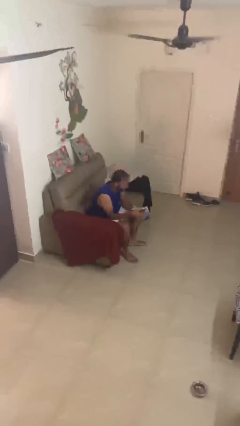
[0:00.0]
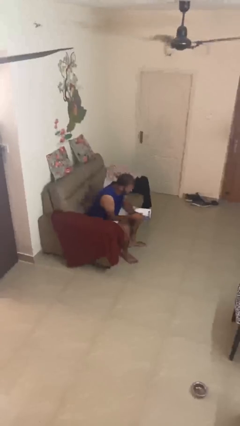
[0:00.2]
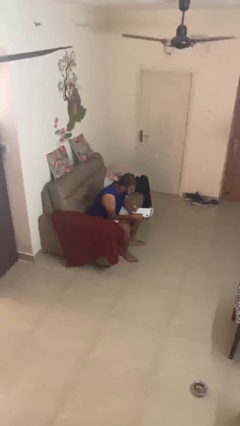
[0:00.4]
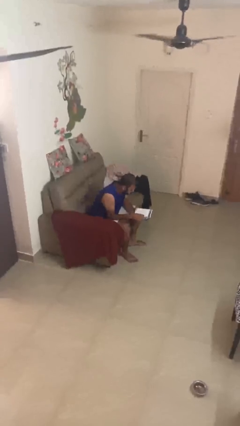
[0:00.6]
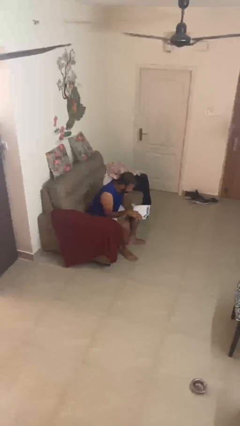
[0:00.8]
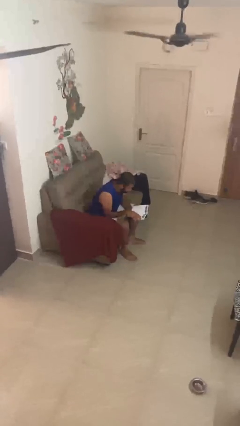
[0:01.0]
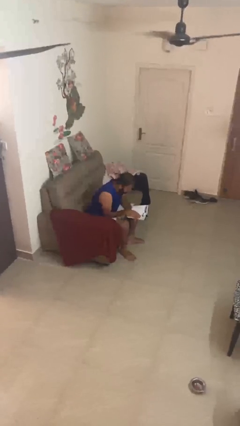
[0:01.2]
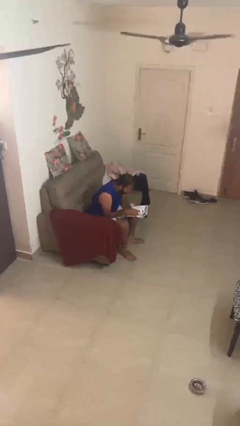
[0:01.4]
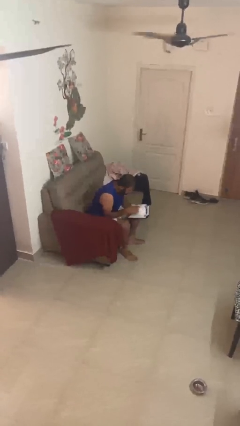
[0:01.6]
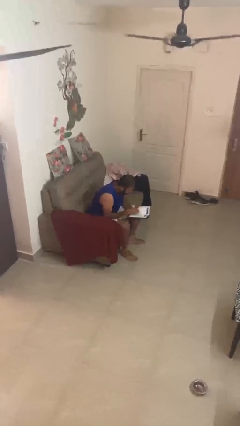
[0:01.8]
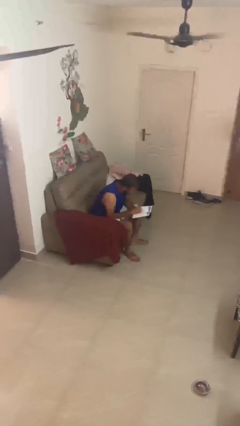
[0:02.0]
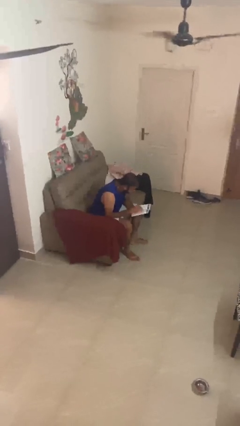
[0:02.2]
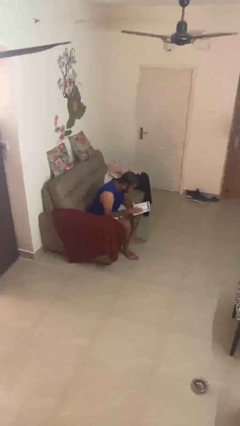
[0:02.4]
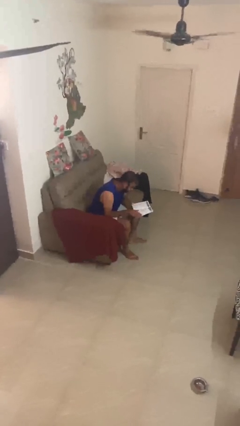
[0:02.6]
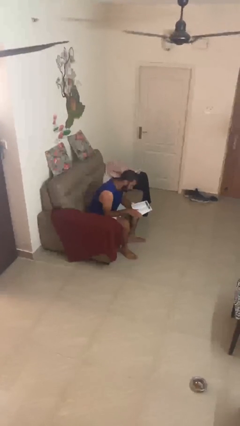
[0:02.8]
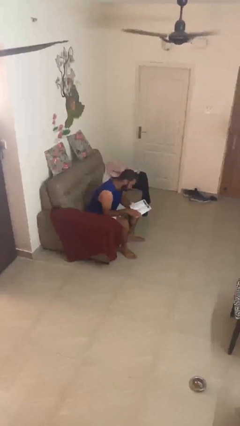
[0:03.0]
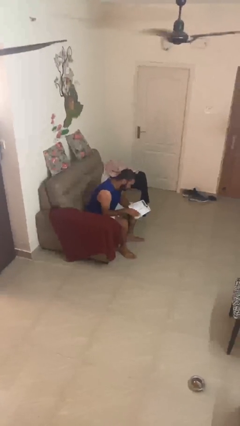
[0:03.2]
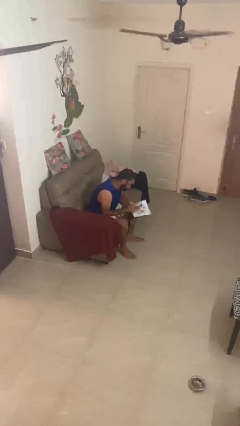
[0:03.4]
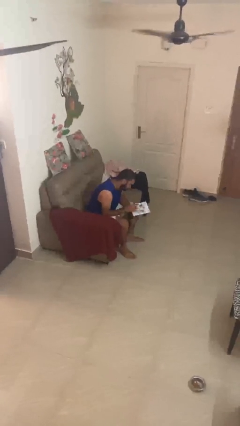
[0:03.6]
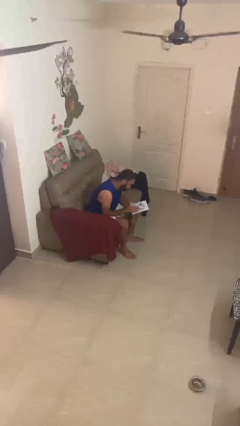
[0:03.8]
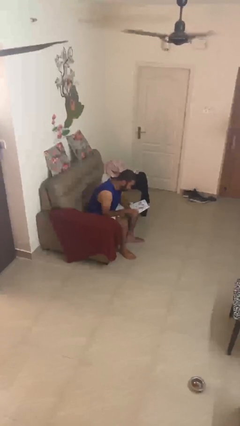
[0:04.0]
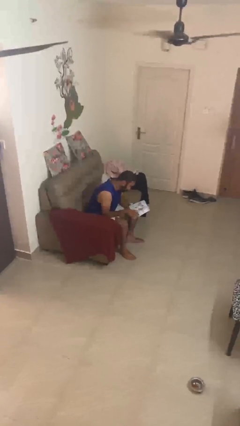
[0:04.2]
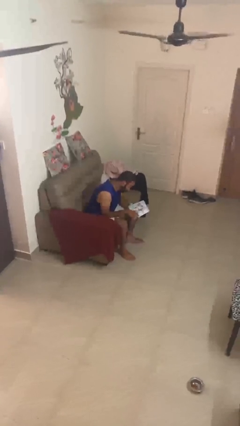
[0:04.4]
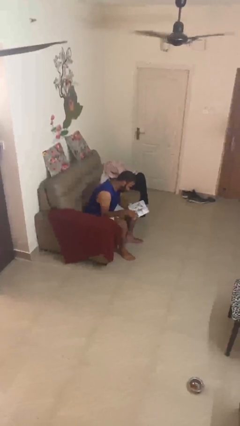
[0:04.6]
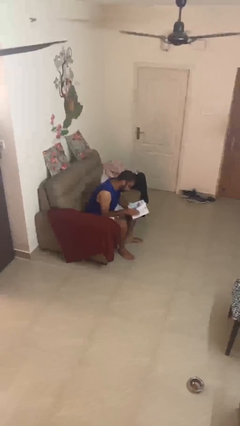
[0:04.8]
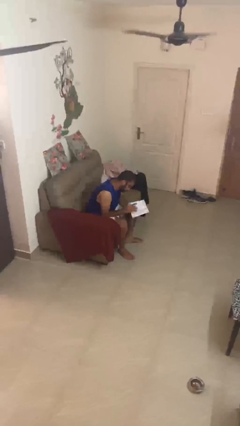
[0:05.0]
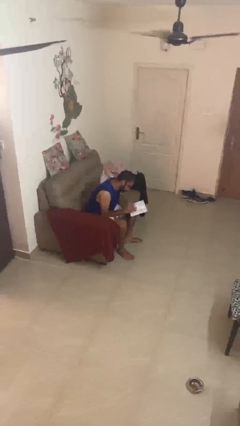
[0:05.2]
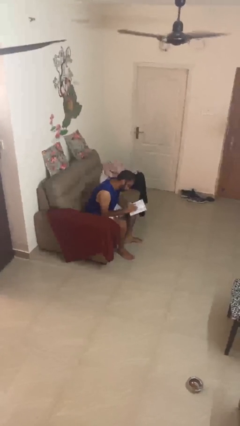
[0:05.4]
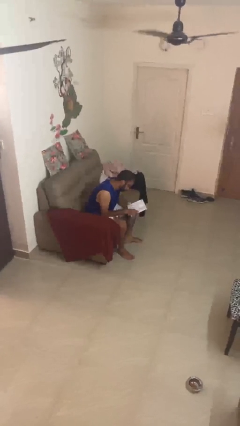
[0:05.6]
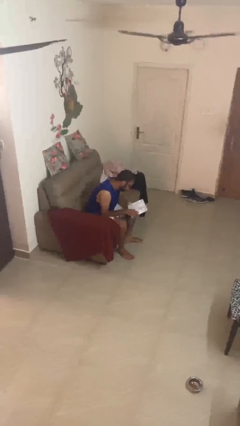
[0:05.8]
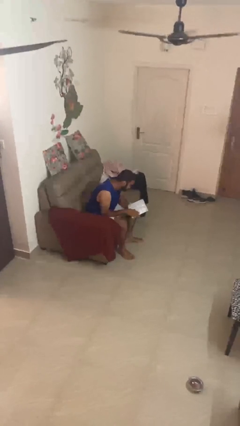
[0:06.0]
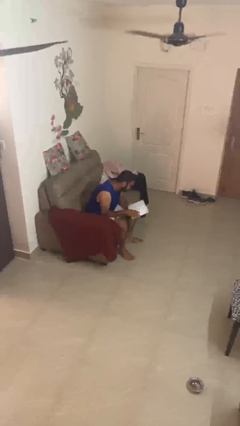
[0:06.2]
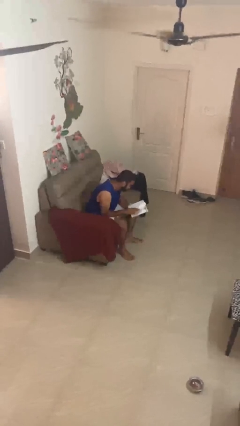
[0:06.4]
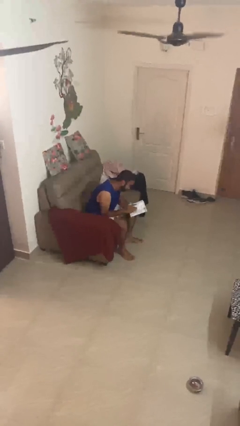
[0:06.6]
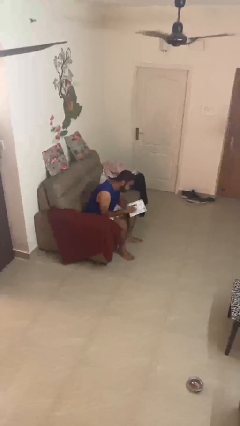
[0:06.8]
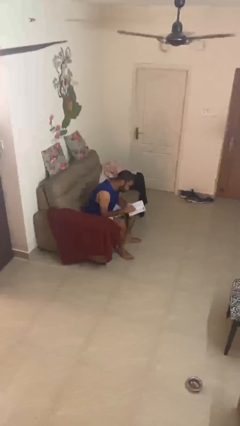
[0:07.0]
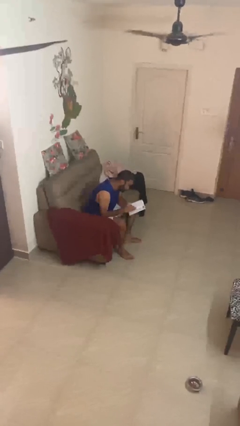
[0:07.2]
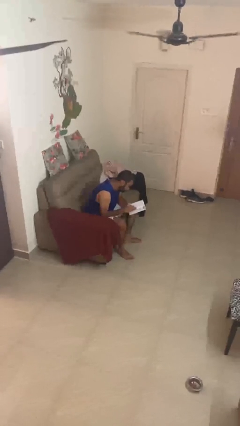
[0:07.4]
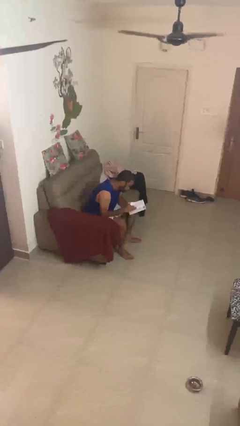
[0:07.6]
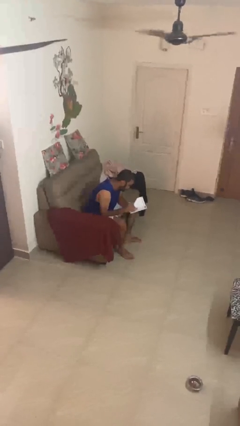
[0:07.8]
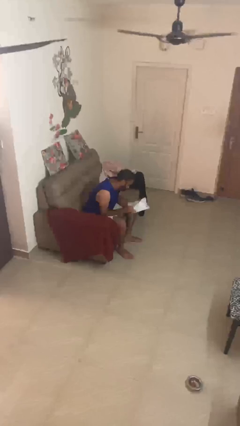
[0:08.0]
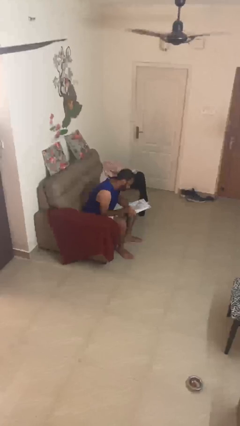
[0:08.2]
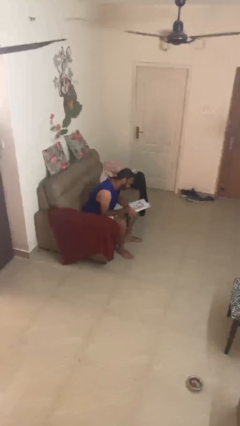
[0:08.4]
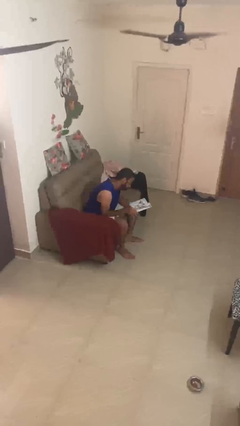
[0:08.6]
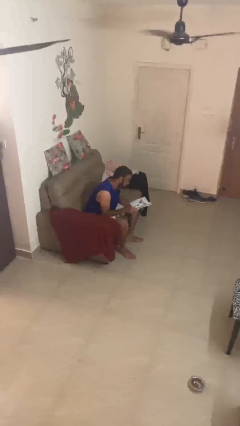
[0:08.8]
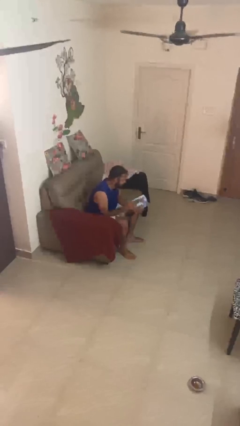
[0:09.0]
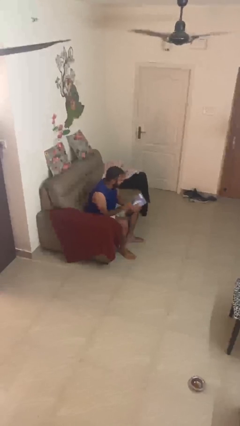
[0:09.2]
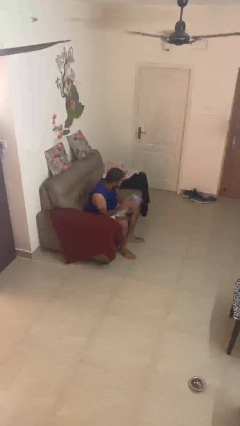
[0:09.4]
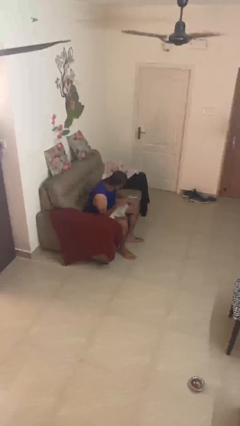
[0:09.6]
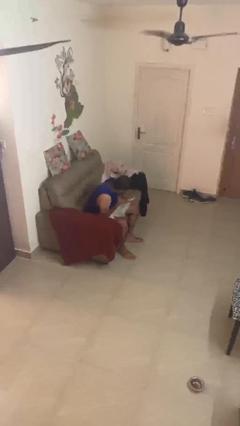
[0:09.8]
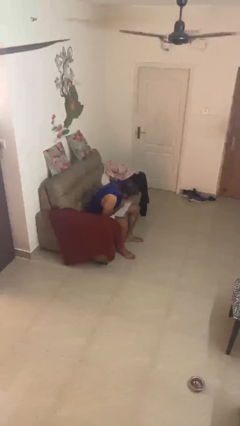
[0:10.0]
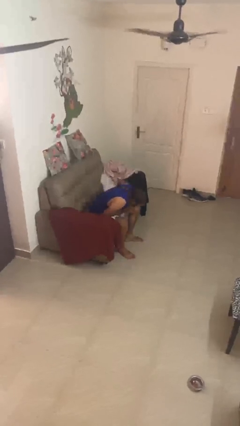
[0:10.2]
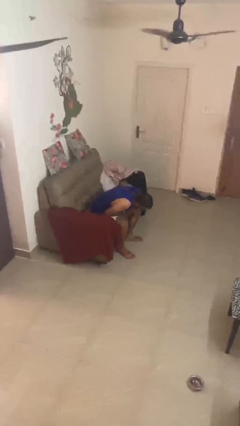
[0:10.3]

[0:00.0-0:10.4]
person reads document

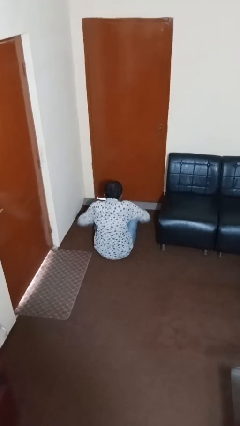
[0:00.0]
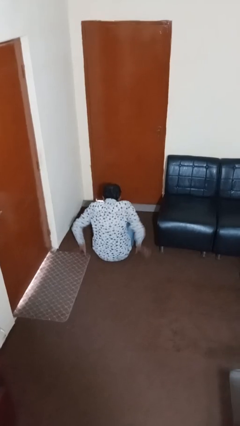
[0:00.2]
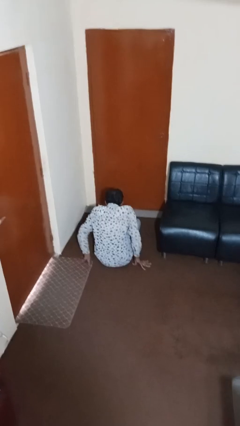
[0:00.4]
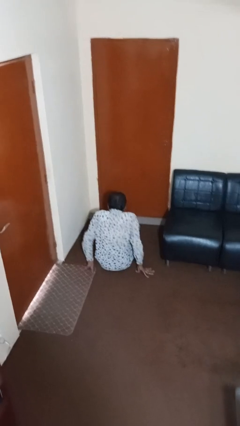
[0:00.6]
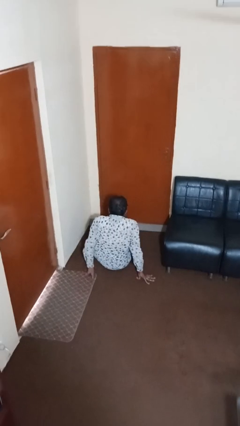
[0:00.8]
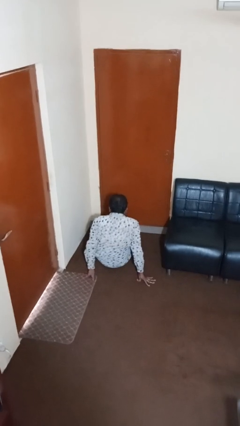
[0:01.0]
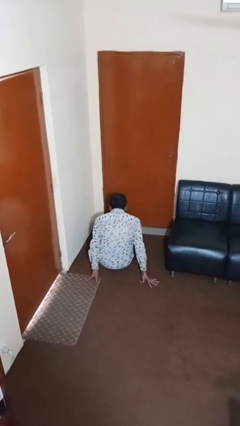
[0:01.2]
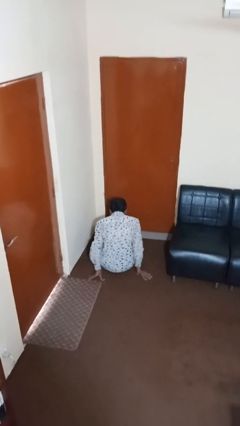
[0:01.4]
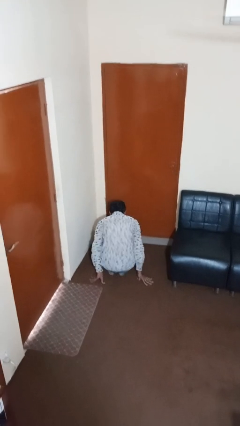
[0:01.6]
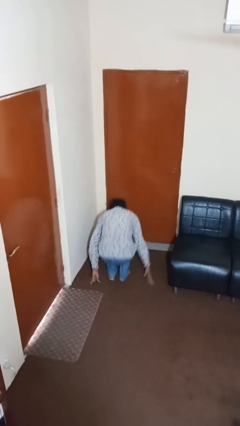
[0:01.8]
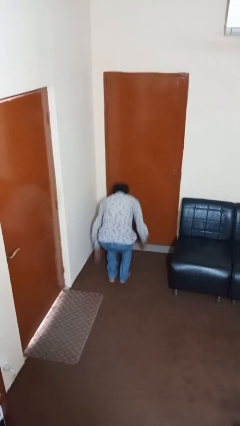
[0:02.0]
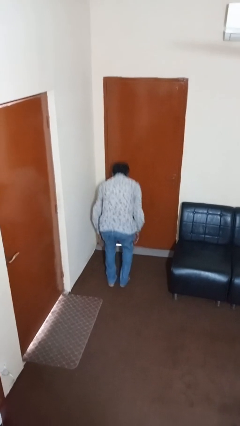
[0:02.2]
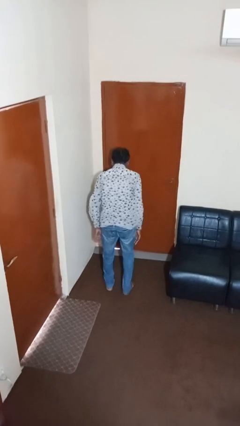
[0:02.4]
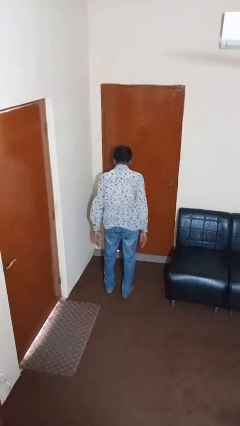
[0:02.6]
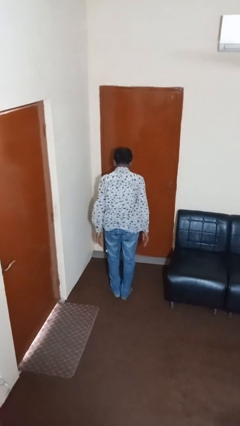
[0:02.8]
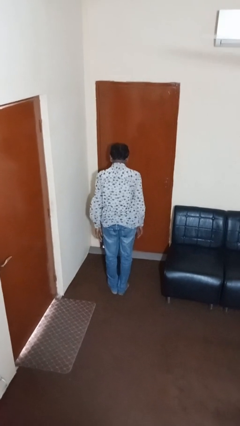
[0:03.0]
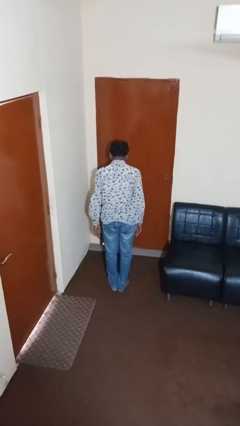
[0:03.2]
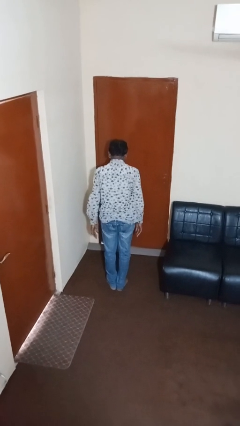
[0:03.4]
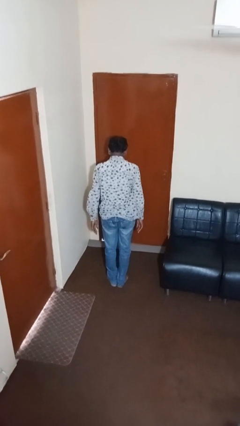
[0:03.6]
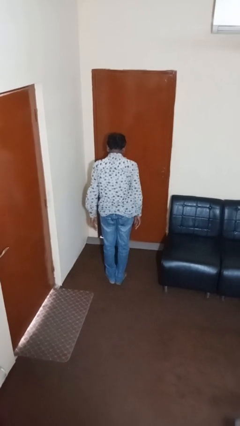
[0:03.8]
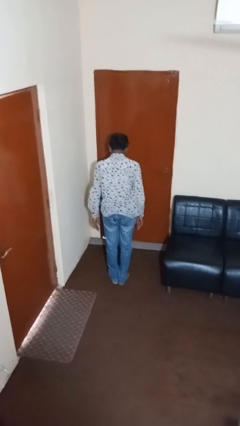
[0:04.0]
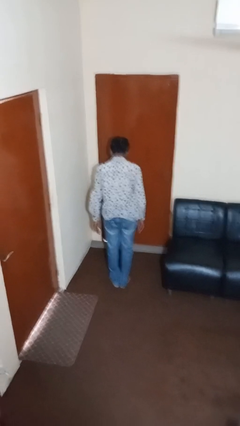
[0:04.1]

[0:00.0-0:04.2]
person stands up from floor

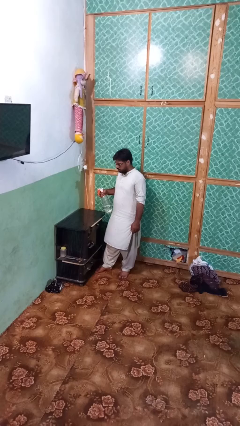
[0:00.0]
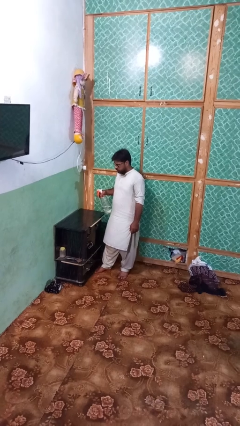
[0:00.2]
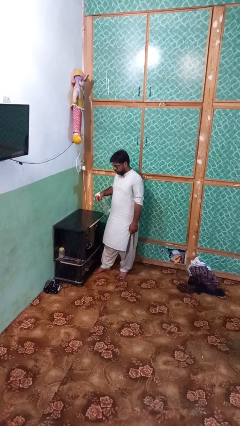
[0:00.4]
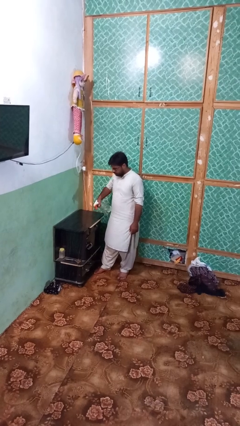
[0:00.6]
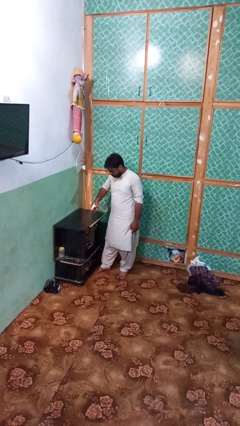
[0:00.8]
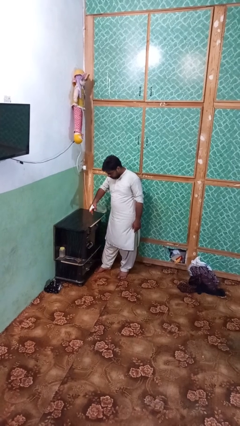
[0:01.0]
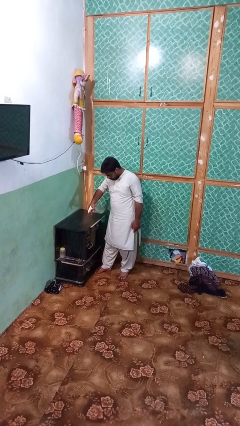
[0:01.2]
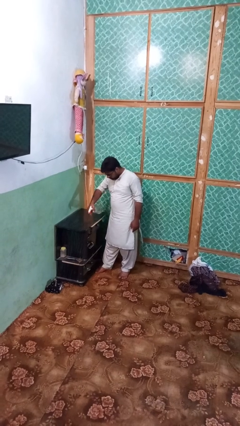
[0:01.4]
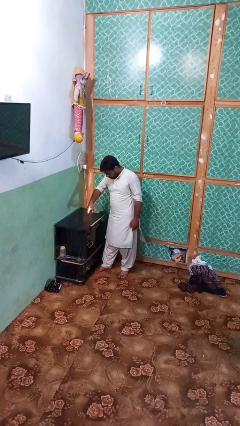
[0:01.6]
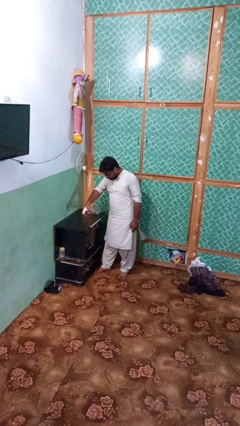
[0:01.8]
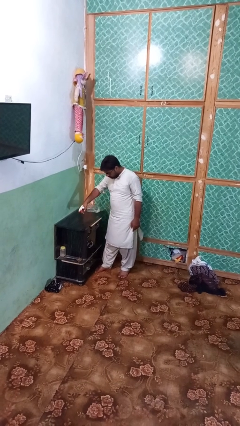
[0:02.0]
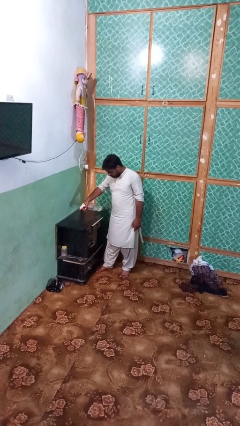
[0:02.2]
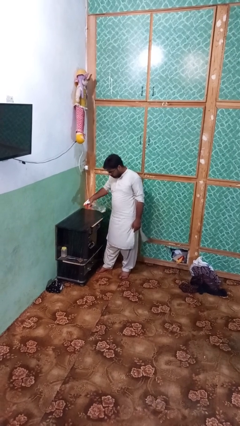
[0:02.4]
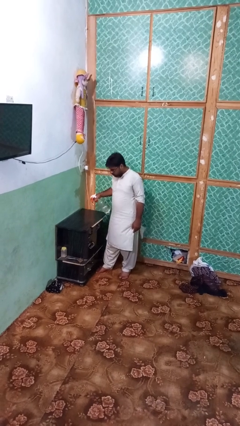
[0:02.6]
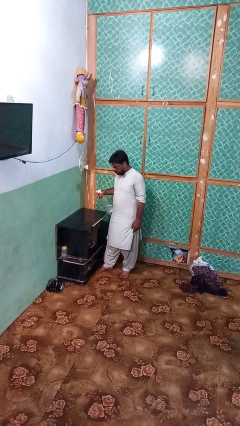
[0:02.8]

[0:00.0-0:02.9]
person sprays from bottle

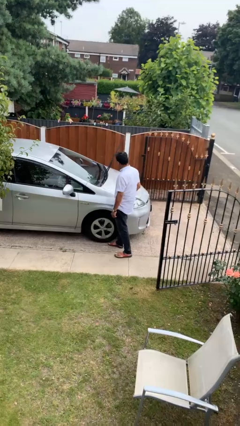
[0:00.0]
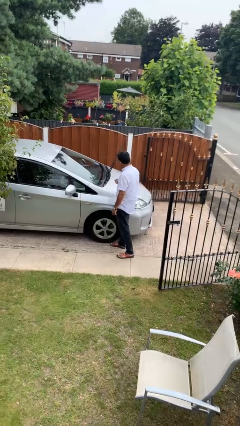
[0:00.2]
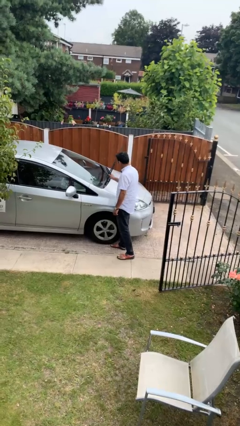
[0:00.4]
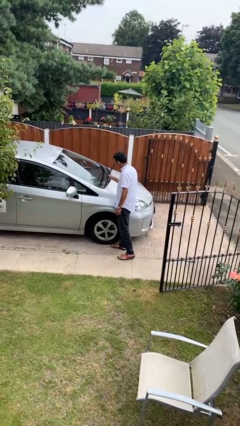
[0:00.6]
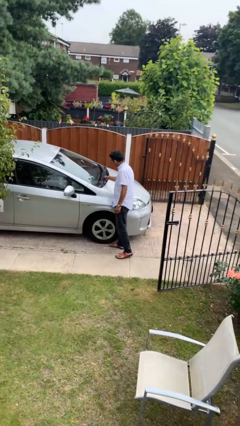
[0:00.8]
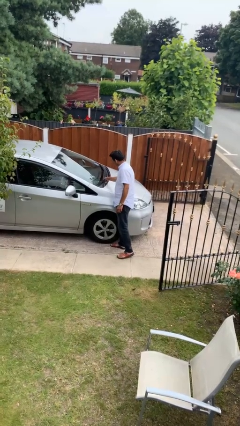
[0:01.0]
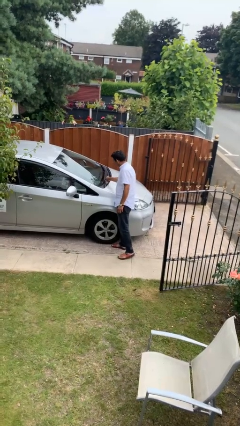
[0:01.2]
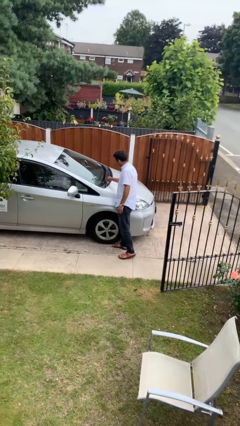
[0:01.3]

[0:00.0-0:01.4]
person flips down car wipers
